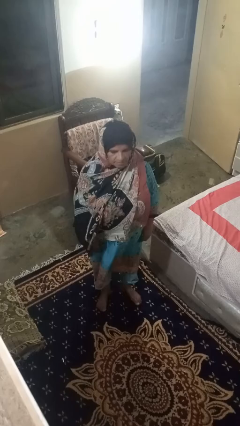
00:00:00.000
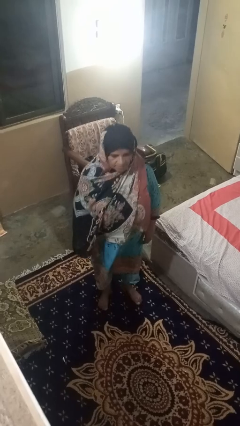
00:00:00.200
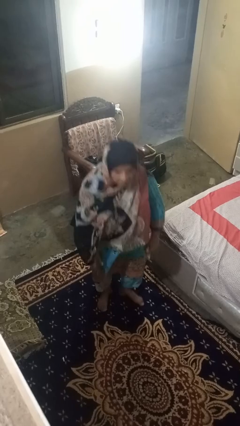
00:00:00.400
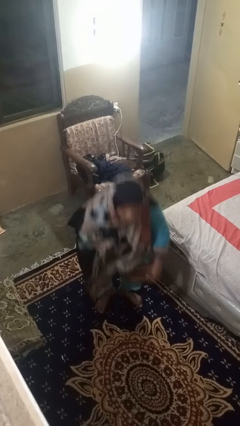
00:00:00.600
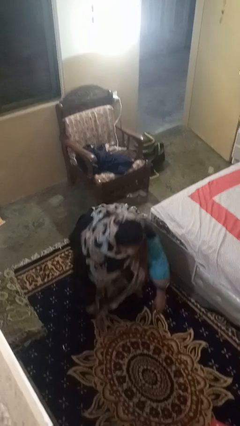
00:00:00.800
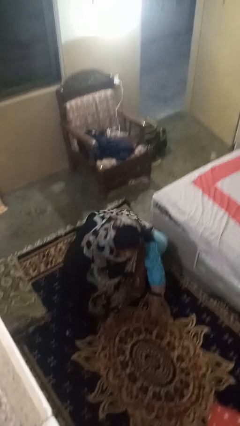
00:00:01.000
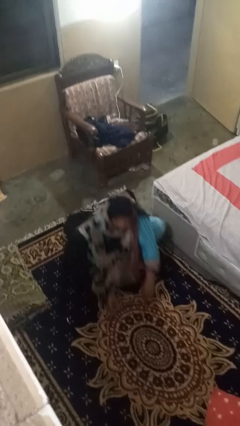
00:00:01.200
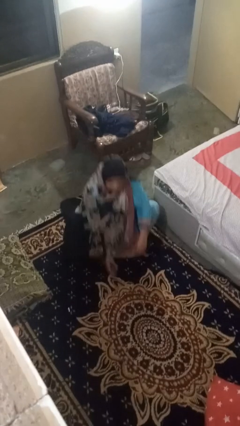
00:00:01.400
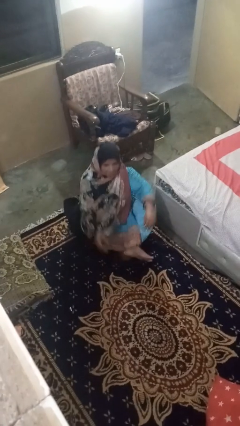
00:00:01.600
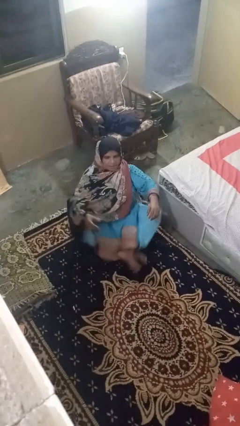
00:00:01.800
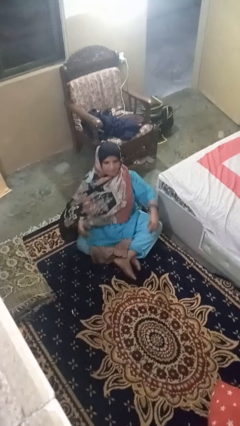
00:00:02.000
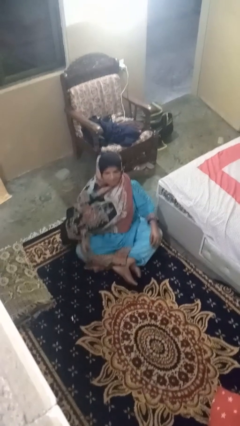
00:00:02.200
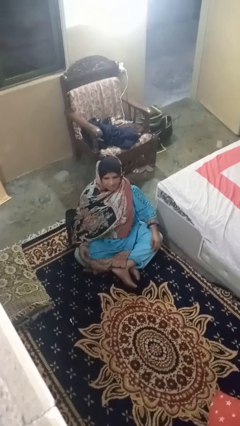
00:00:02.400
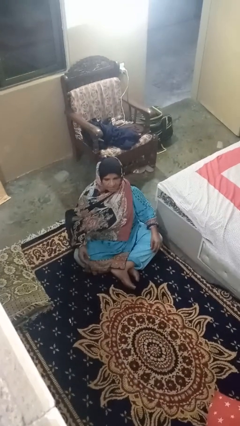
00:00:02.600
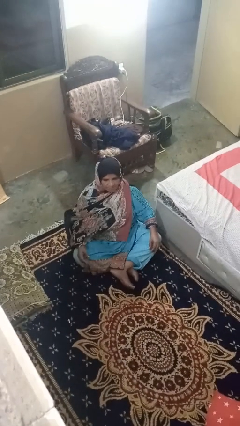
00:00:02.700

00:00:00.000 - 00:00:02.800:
person sits crisscross

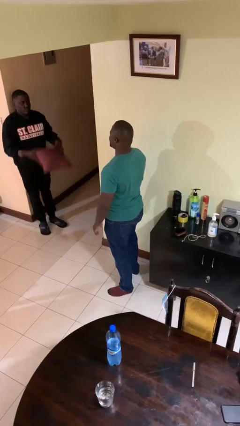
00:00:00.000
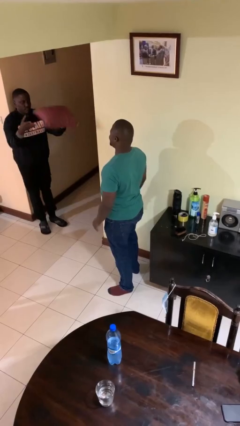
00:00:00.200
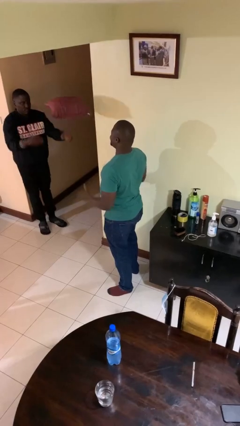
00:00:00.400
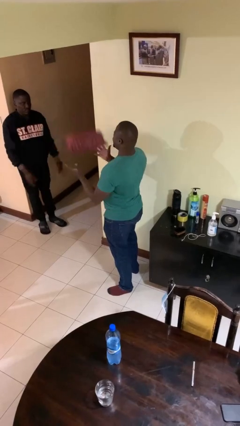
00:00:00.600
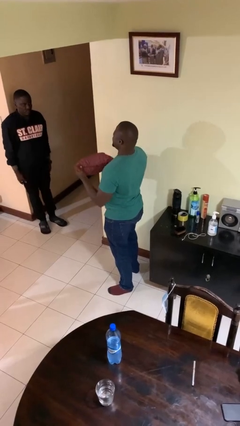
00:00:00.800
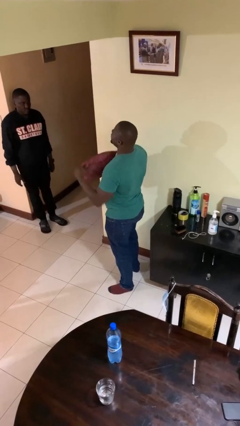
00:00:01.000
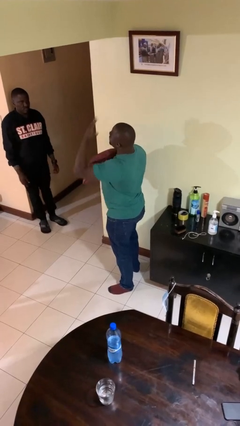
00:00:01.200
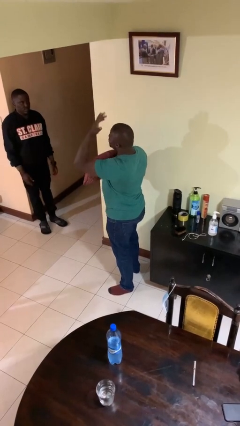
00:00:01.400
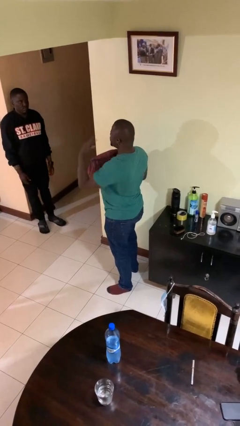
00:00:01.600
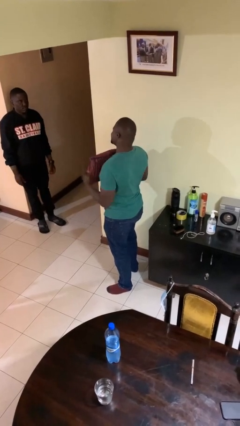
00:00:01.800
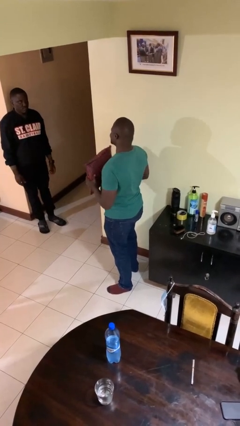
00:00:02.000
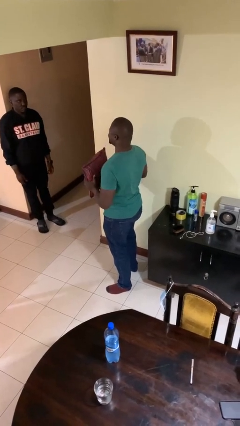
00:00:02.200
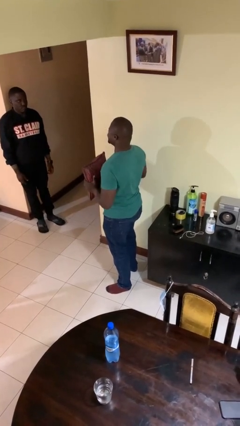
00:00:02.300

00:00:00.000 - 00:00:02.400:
person catches object from person

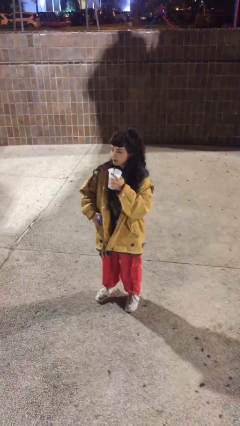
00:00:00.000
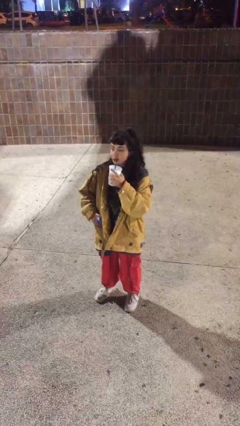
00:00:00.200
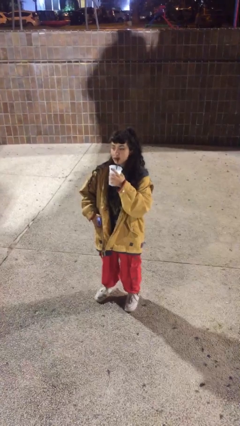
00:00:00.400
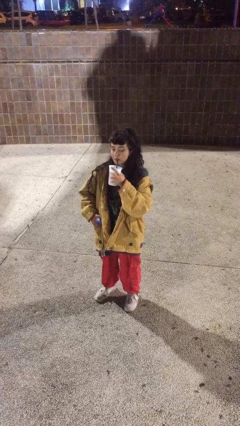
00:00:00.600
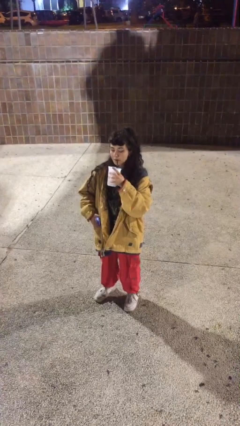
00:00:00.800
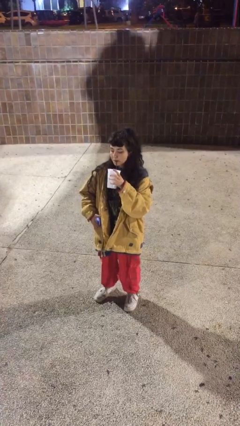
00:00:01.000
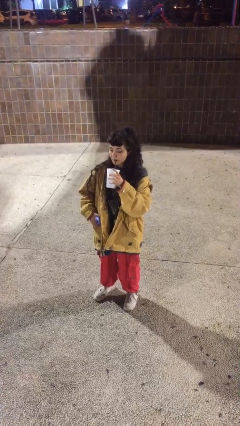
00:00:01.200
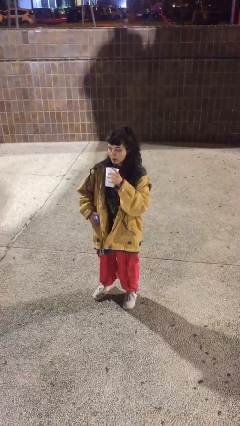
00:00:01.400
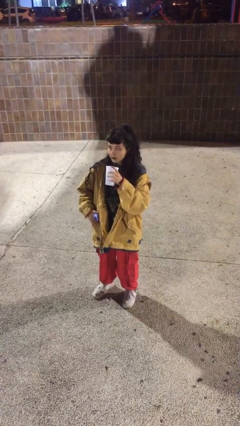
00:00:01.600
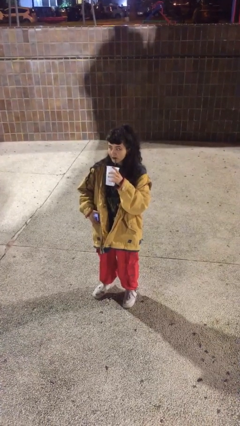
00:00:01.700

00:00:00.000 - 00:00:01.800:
person drinks from straw

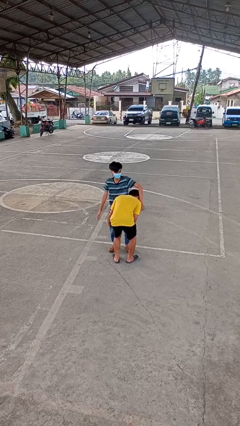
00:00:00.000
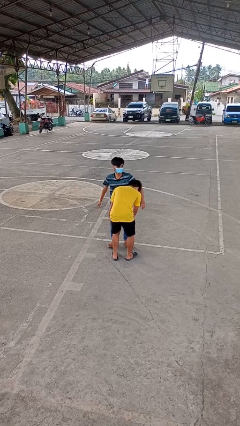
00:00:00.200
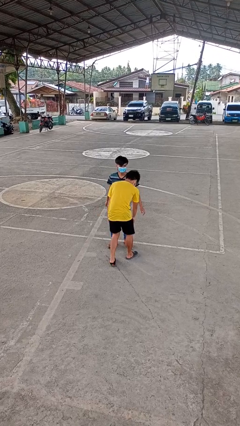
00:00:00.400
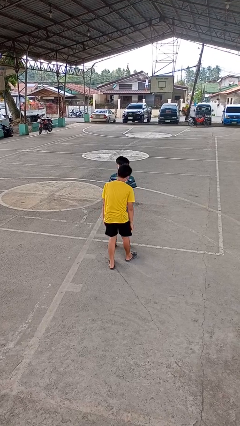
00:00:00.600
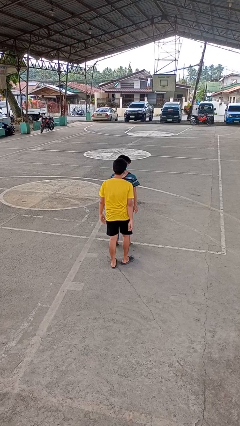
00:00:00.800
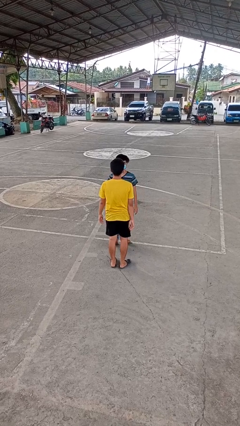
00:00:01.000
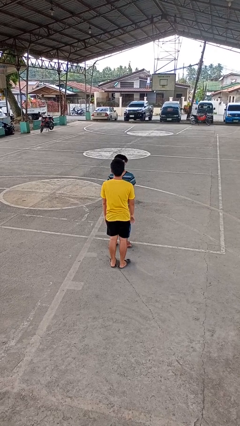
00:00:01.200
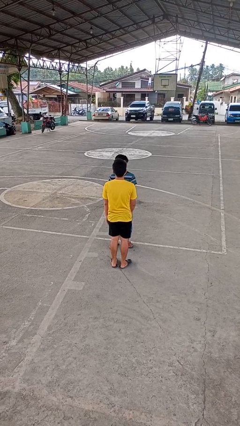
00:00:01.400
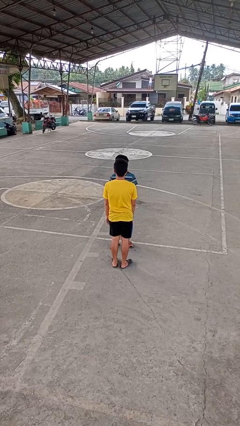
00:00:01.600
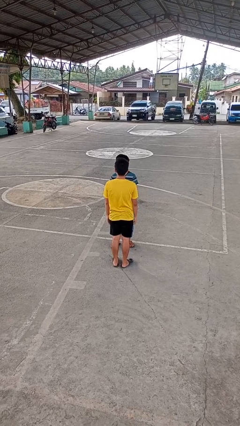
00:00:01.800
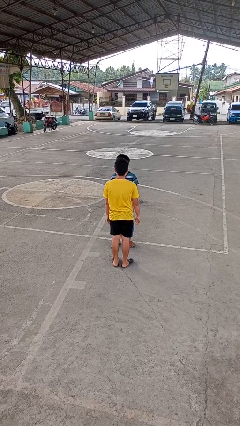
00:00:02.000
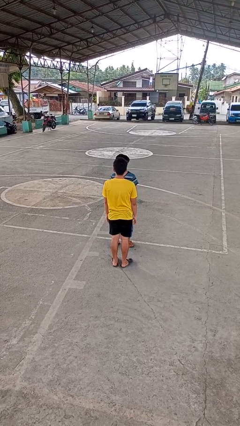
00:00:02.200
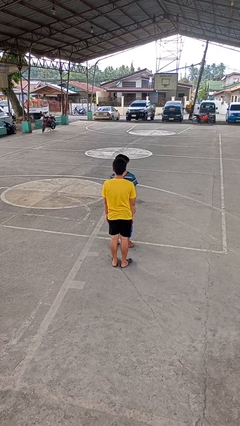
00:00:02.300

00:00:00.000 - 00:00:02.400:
person puts down person

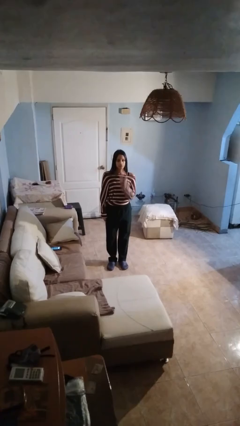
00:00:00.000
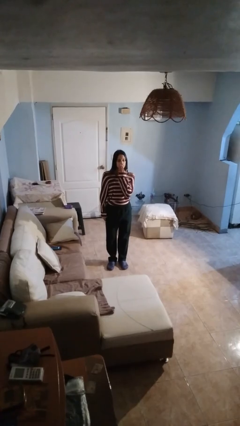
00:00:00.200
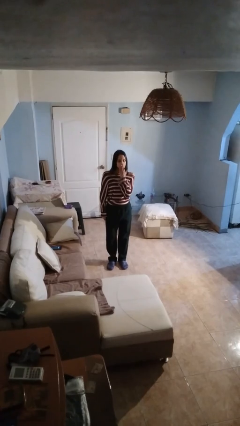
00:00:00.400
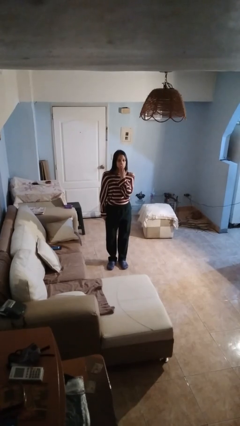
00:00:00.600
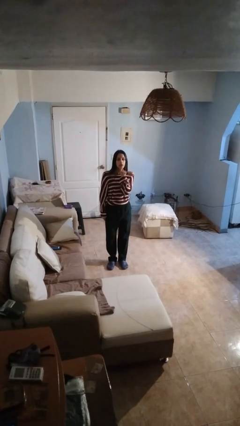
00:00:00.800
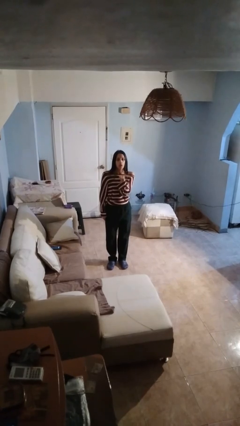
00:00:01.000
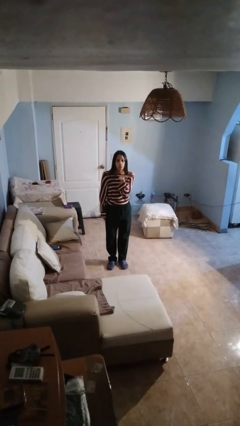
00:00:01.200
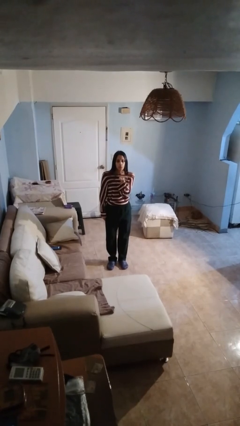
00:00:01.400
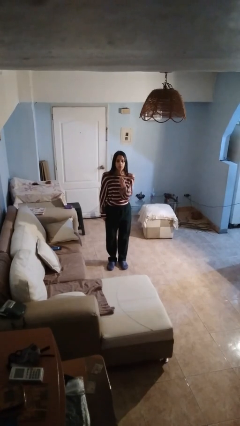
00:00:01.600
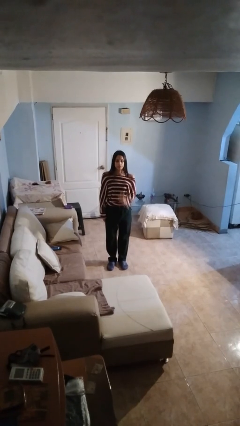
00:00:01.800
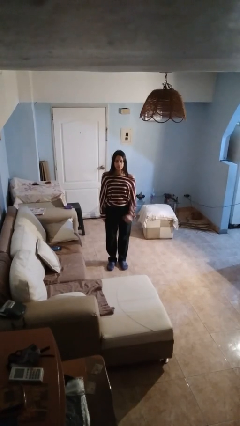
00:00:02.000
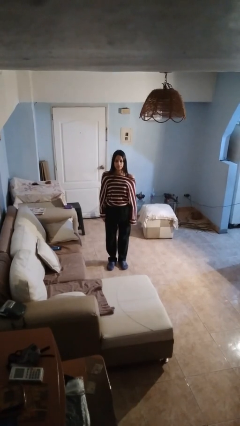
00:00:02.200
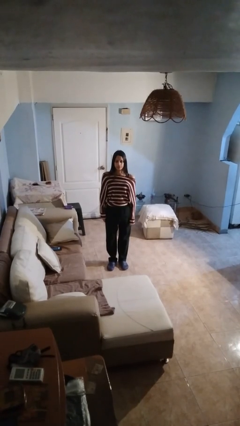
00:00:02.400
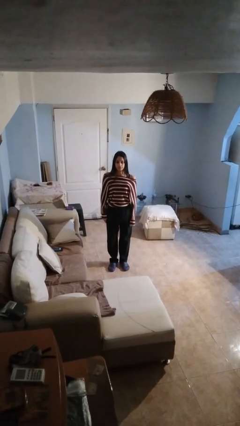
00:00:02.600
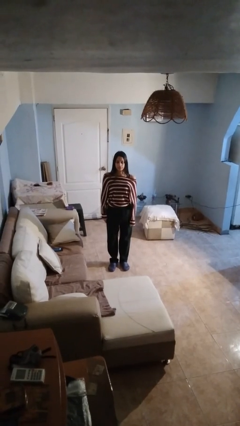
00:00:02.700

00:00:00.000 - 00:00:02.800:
person gestures blow kiss

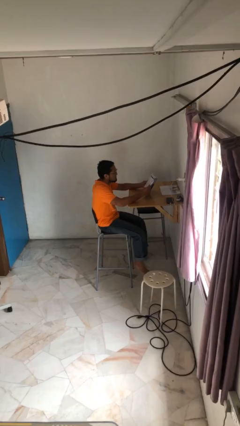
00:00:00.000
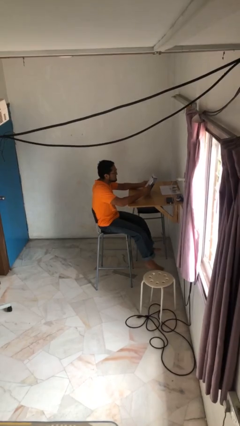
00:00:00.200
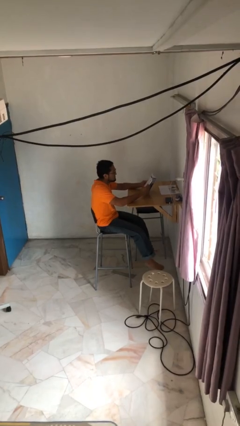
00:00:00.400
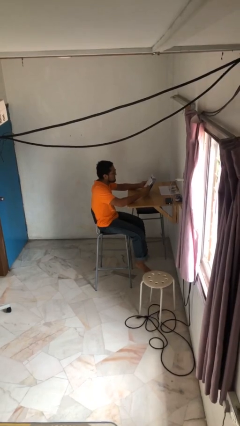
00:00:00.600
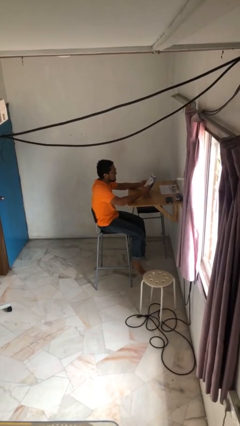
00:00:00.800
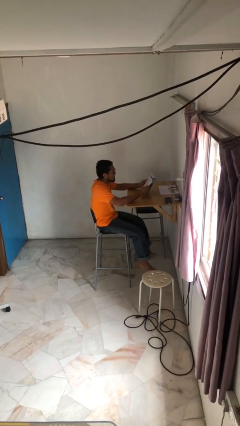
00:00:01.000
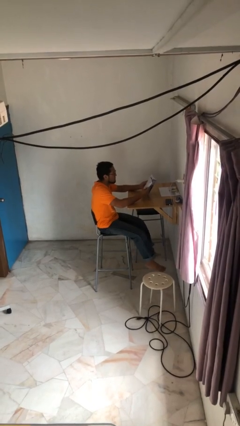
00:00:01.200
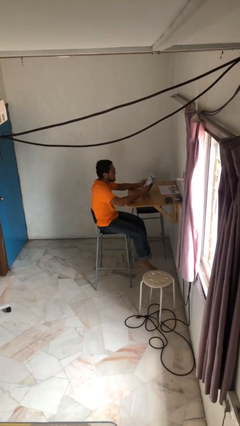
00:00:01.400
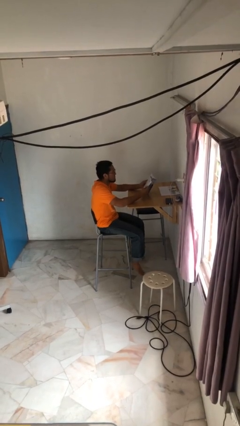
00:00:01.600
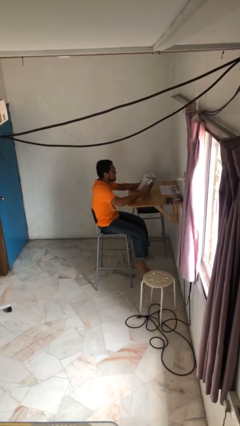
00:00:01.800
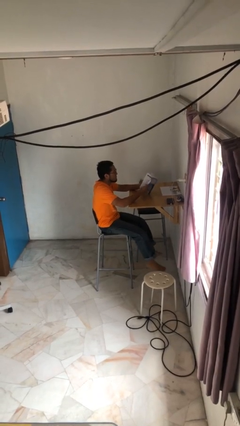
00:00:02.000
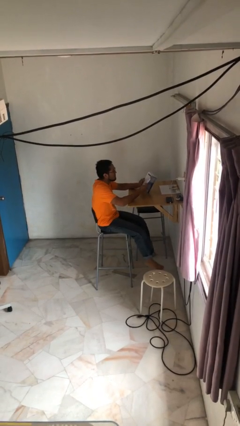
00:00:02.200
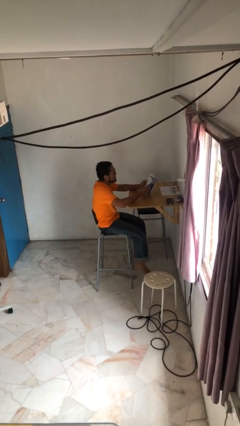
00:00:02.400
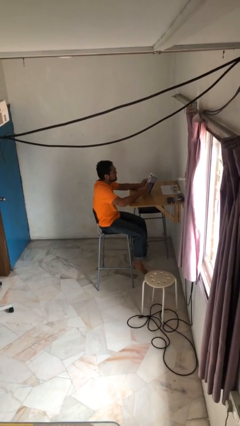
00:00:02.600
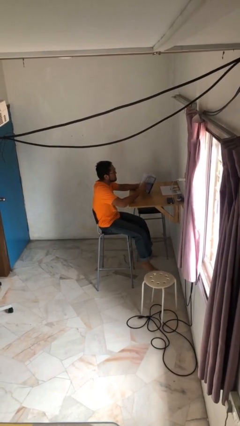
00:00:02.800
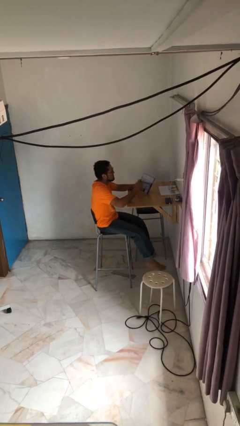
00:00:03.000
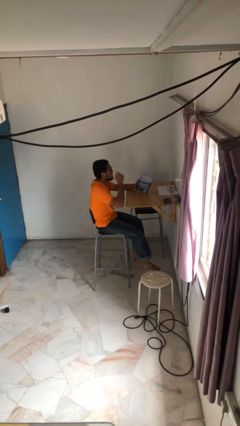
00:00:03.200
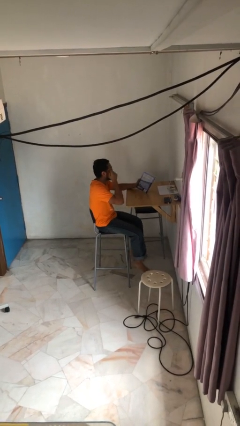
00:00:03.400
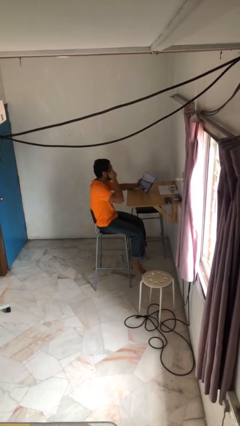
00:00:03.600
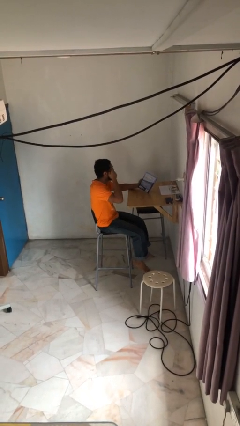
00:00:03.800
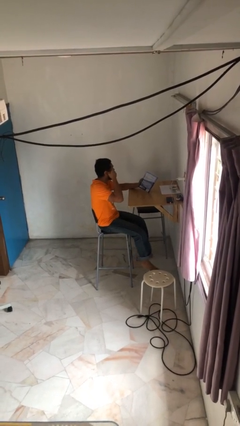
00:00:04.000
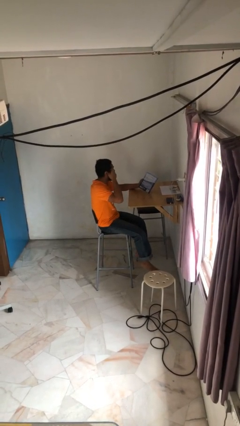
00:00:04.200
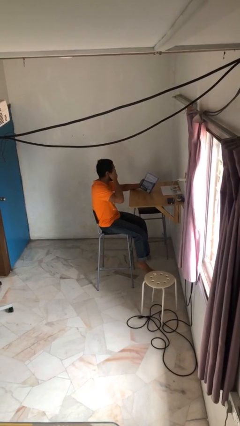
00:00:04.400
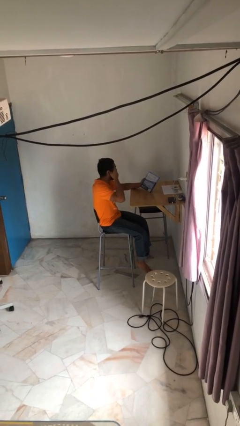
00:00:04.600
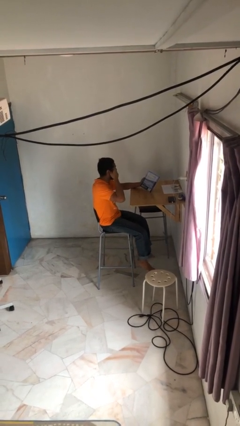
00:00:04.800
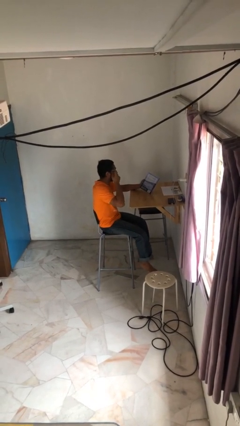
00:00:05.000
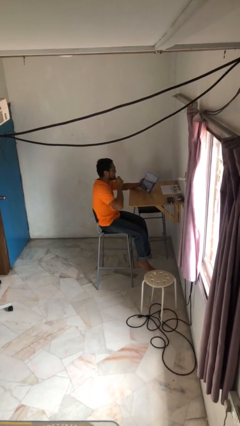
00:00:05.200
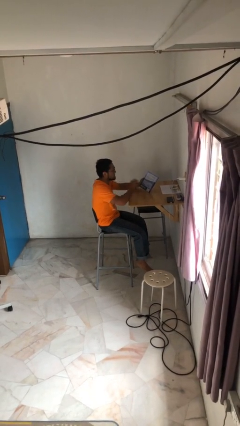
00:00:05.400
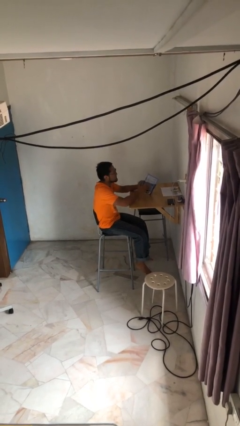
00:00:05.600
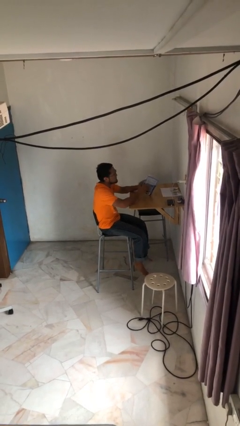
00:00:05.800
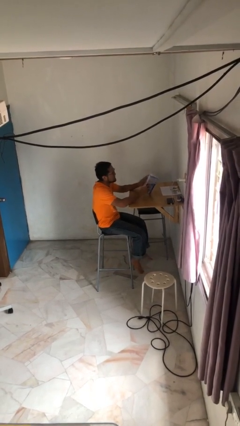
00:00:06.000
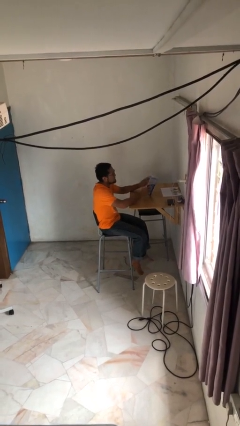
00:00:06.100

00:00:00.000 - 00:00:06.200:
person reads document
